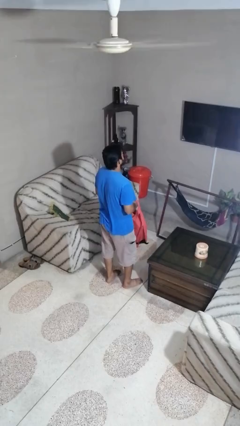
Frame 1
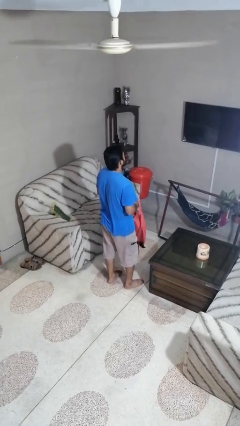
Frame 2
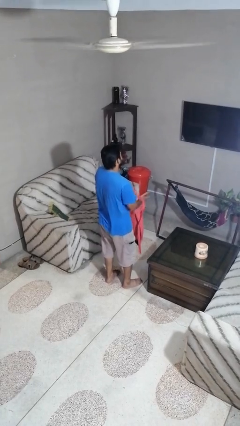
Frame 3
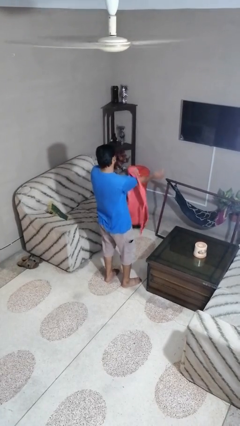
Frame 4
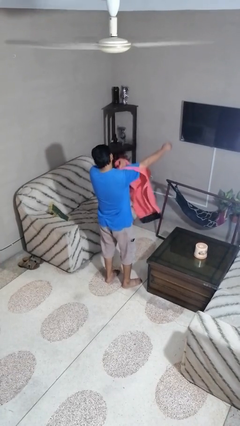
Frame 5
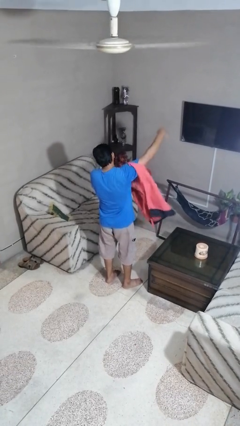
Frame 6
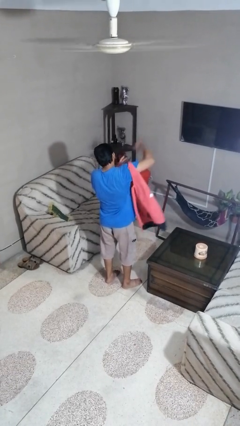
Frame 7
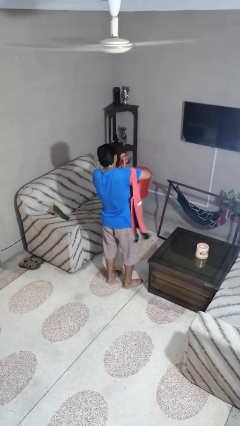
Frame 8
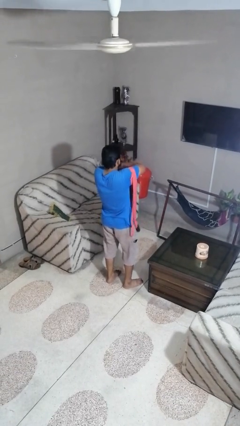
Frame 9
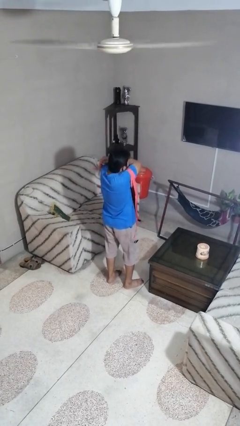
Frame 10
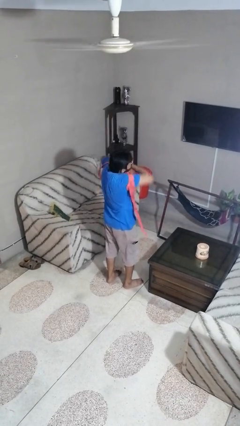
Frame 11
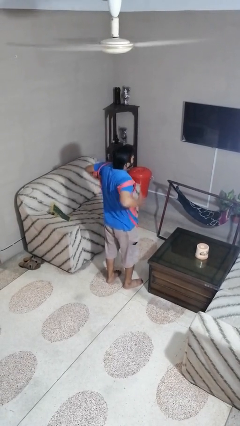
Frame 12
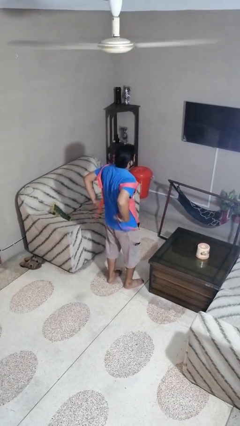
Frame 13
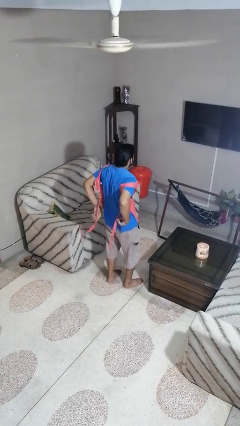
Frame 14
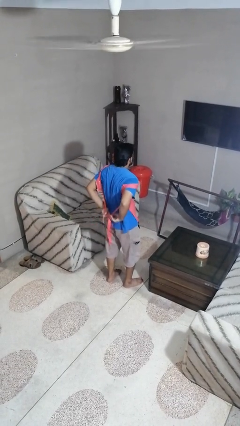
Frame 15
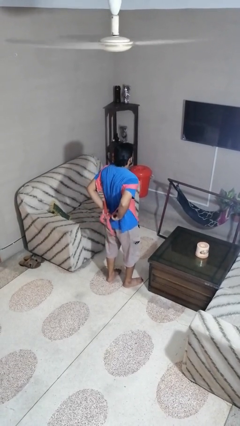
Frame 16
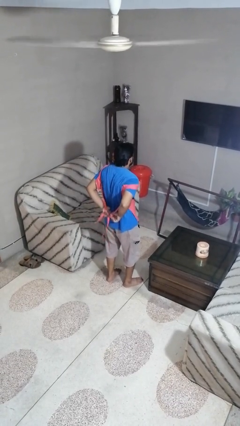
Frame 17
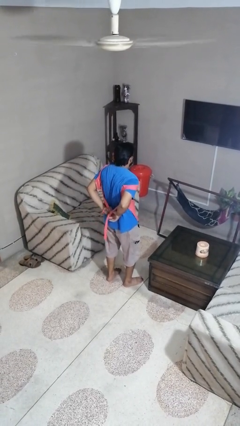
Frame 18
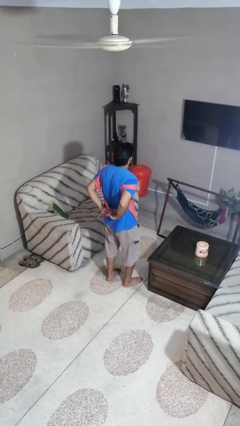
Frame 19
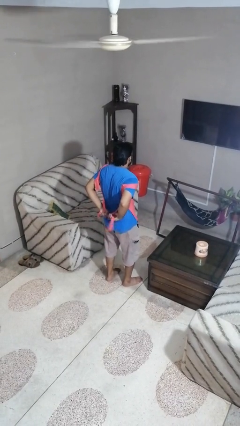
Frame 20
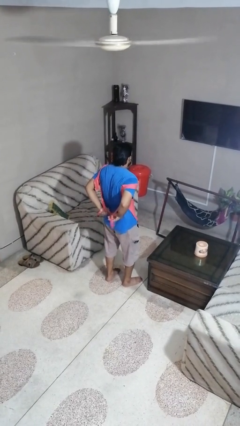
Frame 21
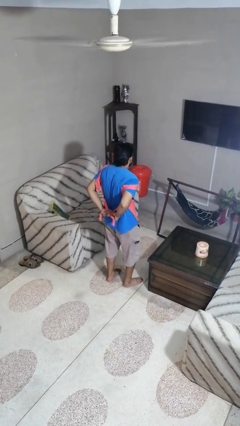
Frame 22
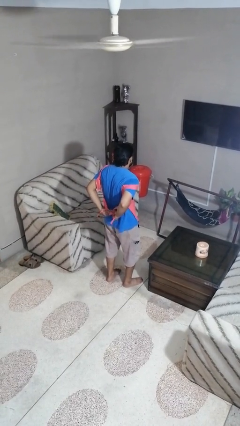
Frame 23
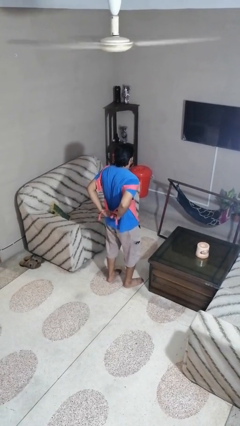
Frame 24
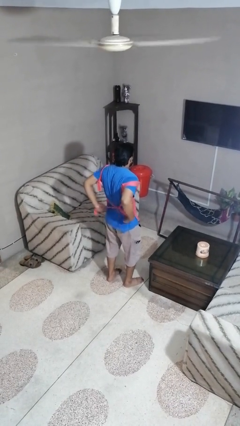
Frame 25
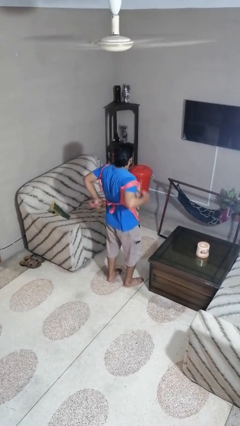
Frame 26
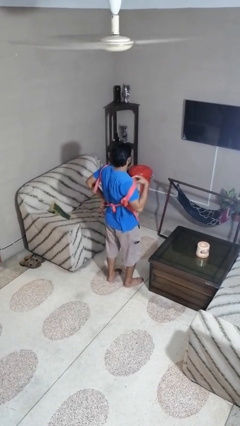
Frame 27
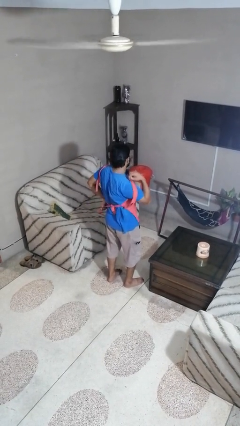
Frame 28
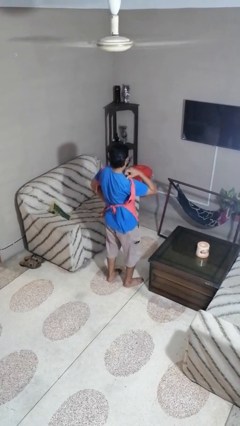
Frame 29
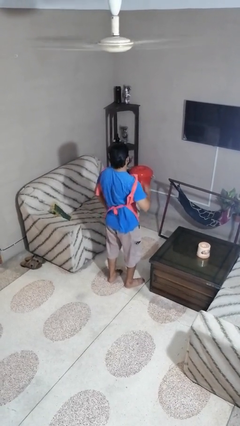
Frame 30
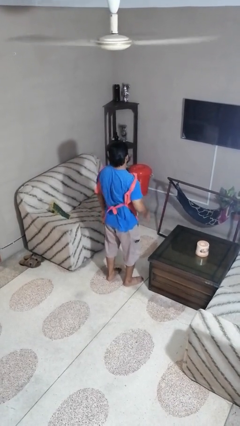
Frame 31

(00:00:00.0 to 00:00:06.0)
person puts on apron

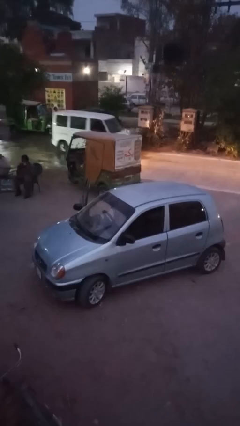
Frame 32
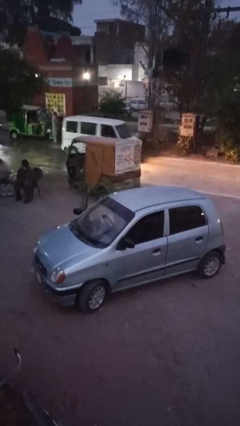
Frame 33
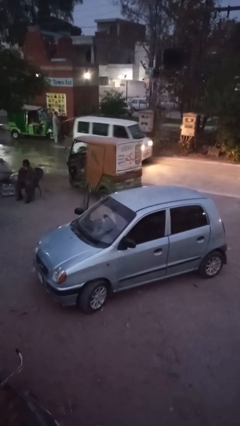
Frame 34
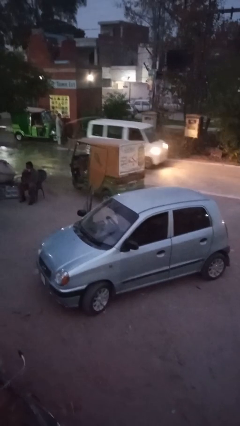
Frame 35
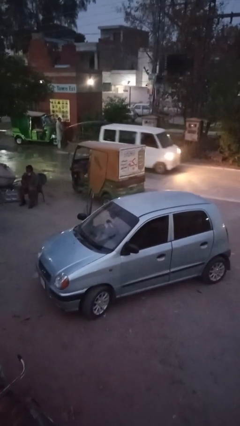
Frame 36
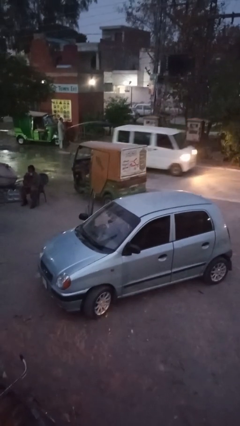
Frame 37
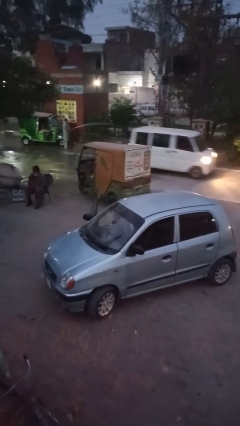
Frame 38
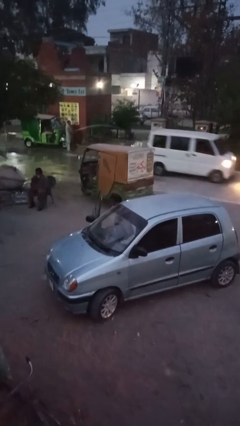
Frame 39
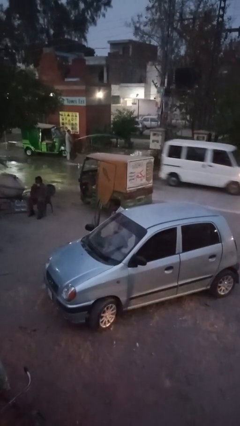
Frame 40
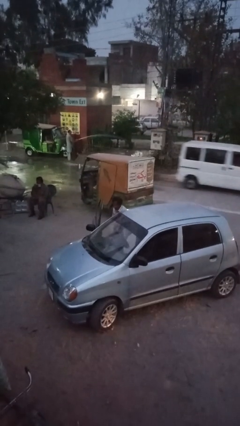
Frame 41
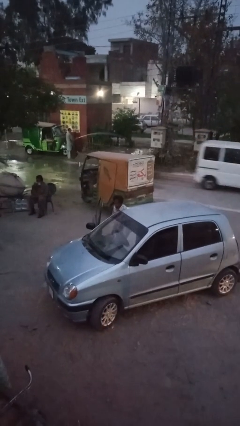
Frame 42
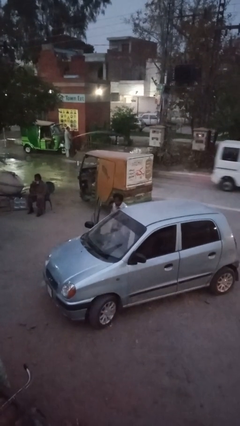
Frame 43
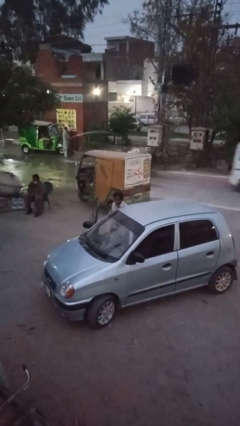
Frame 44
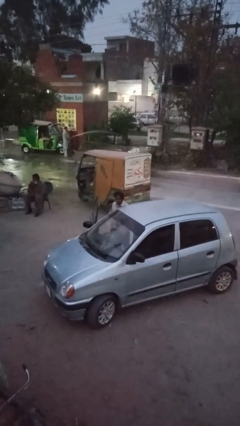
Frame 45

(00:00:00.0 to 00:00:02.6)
person exits car

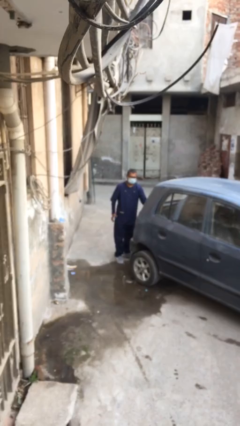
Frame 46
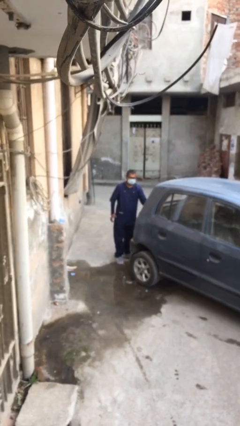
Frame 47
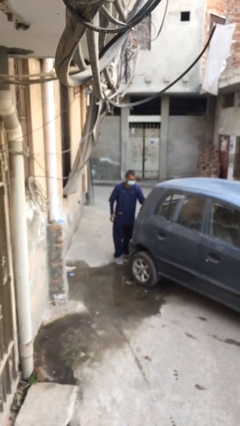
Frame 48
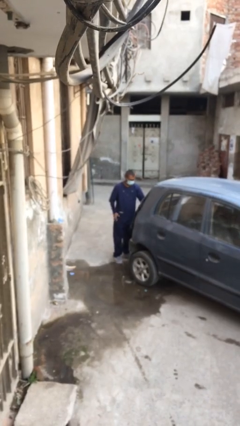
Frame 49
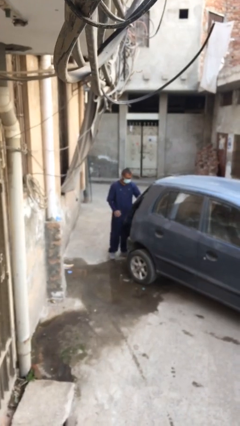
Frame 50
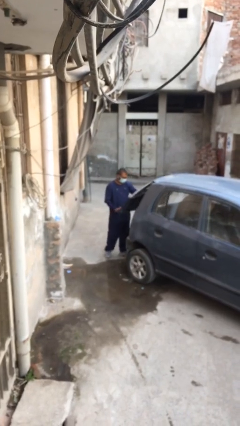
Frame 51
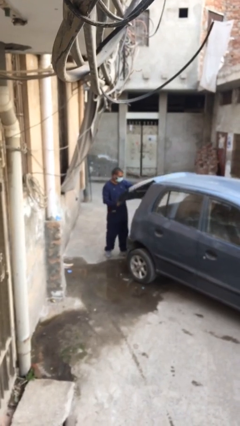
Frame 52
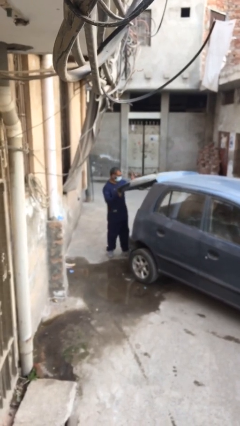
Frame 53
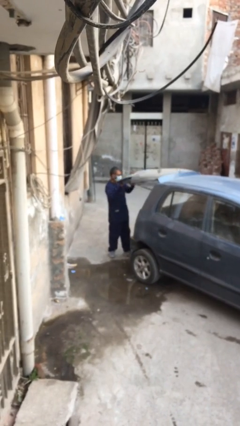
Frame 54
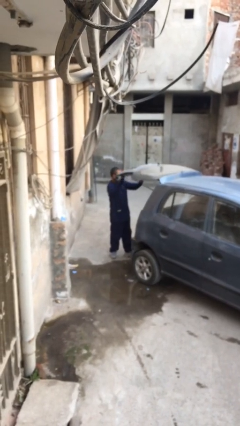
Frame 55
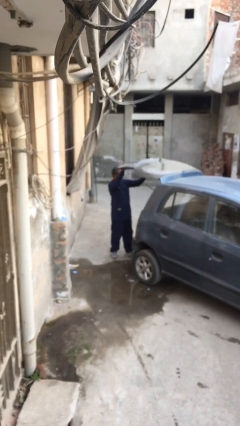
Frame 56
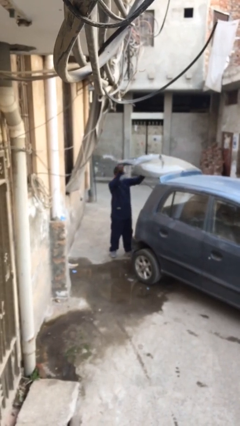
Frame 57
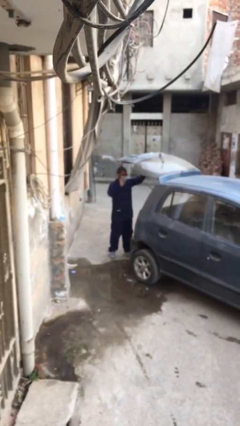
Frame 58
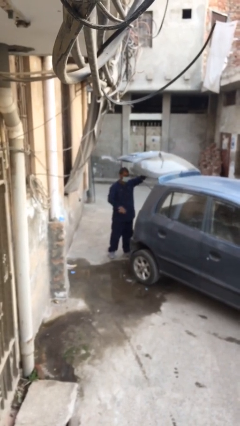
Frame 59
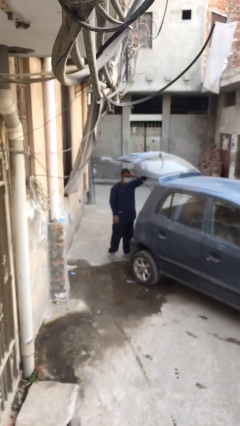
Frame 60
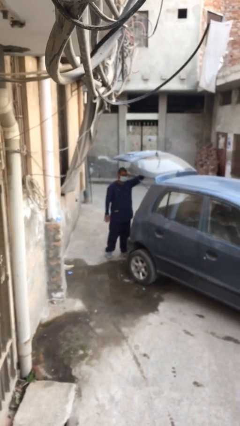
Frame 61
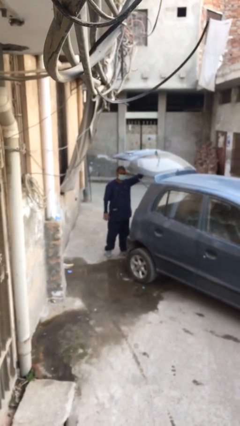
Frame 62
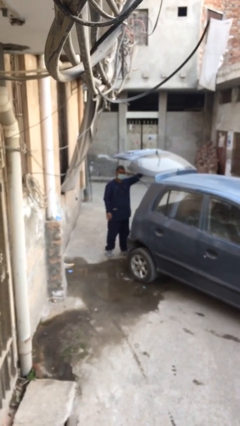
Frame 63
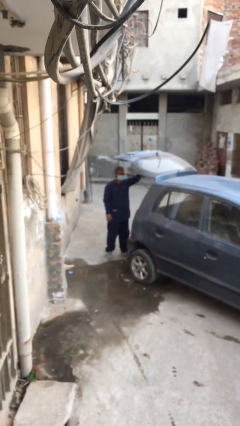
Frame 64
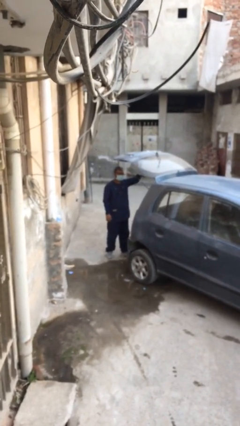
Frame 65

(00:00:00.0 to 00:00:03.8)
person opens car trunk

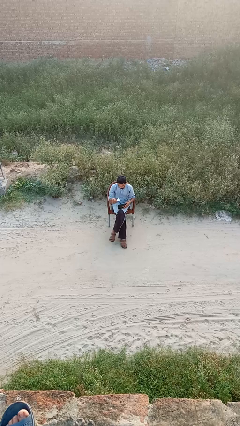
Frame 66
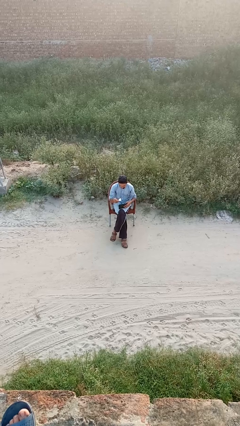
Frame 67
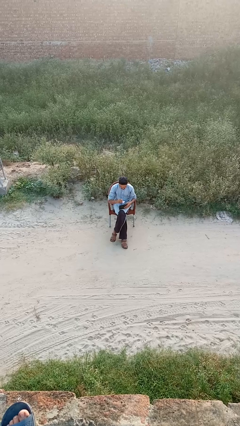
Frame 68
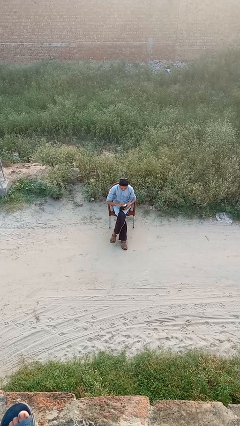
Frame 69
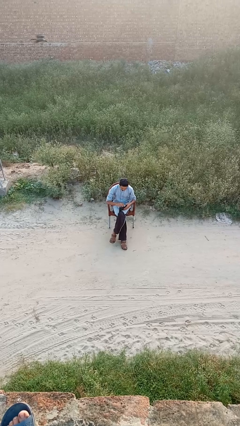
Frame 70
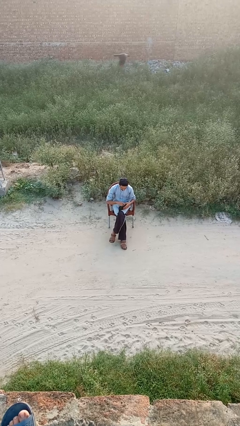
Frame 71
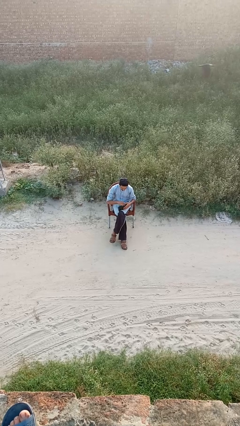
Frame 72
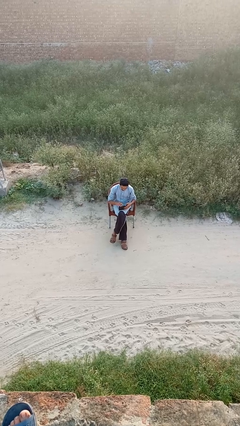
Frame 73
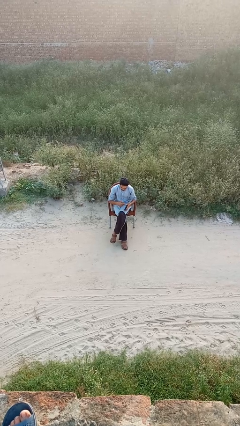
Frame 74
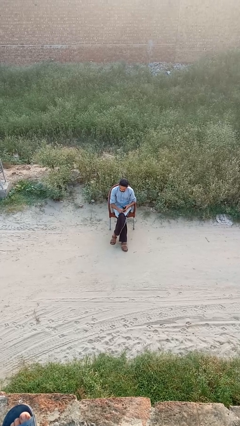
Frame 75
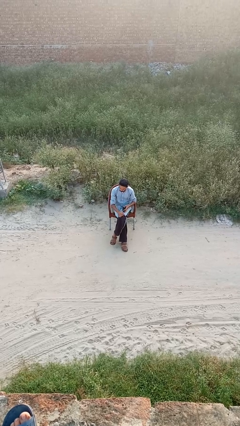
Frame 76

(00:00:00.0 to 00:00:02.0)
person puts object into purse

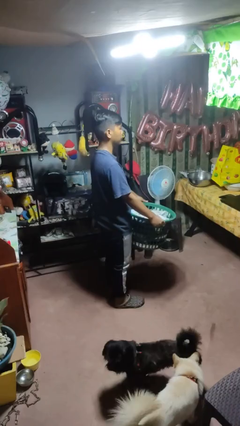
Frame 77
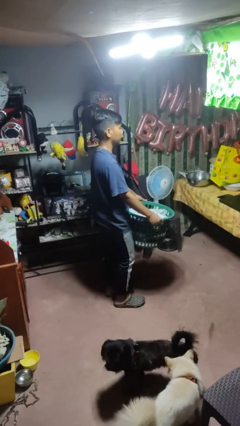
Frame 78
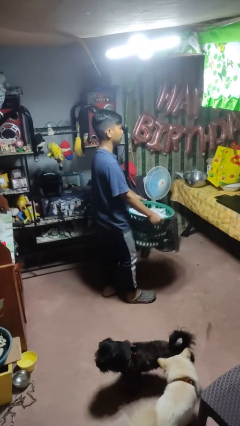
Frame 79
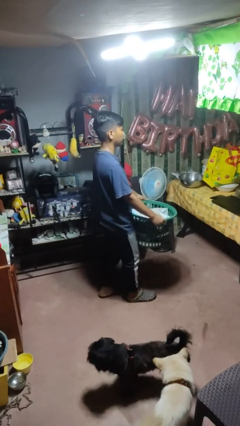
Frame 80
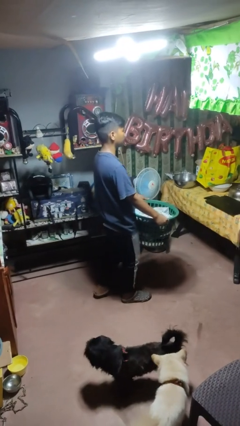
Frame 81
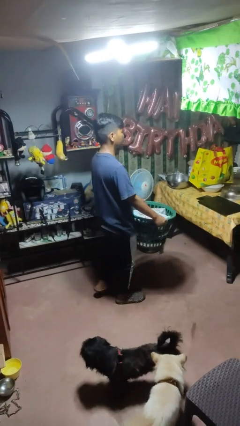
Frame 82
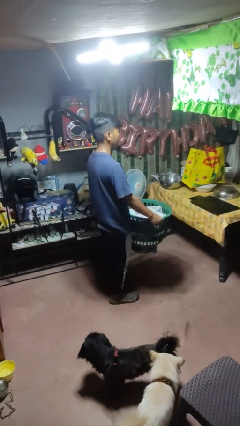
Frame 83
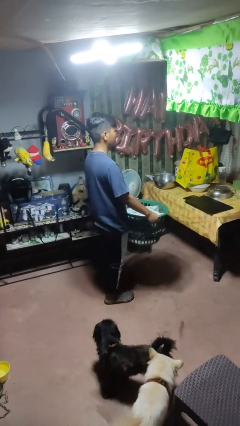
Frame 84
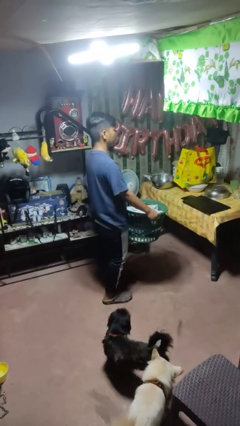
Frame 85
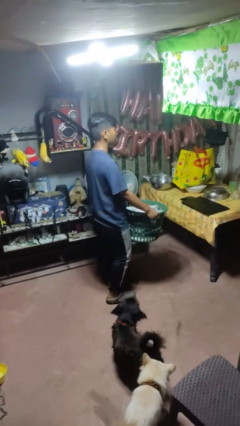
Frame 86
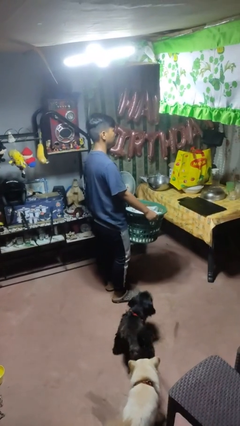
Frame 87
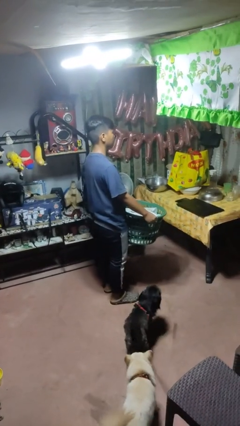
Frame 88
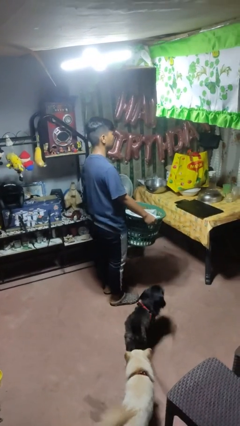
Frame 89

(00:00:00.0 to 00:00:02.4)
person carries laundry basket

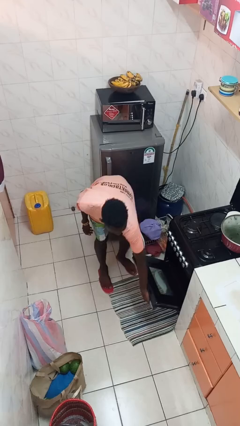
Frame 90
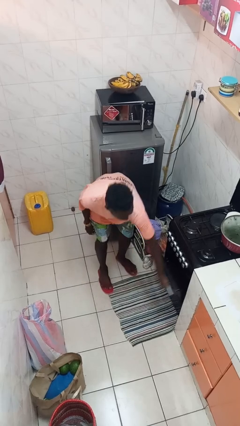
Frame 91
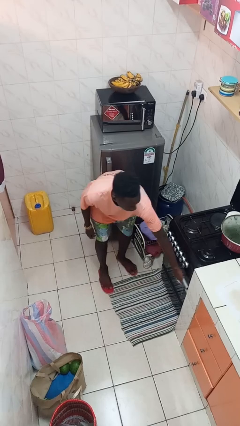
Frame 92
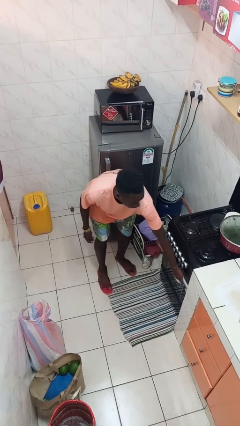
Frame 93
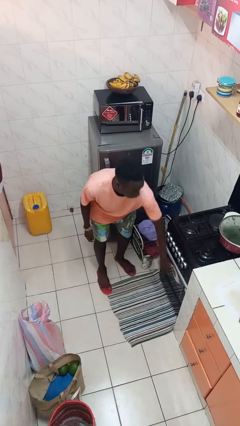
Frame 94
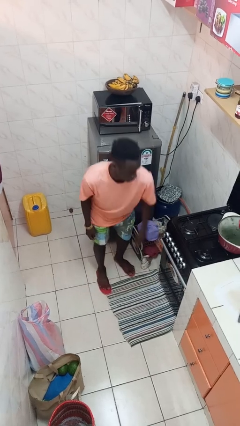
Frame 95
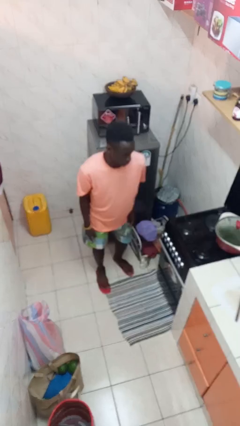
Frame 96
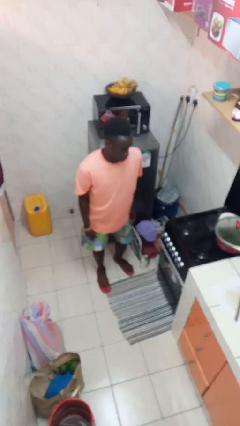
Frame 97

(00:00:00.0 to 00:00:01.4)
person closes oven door
